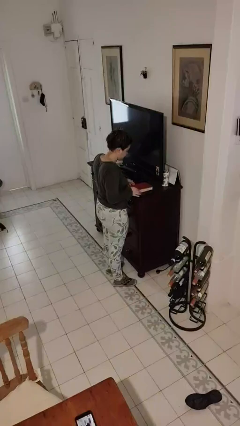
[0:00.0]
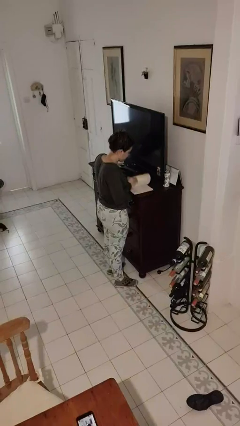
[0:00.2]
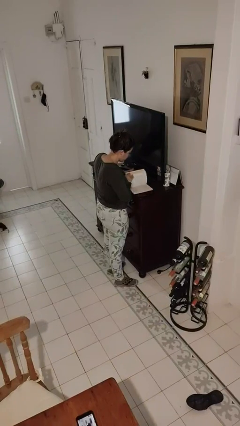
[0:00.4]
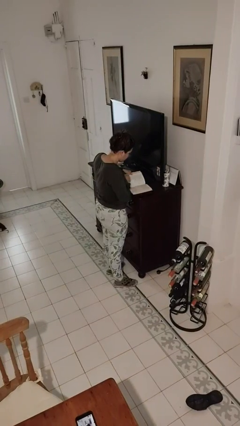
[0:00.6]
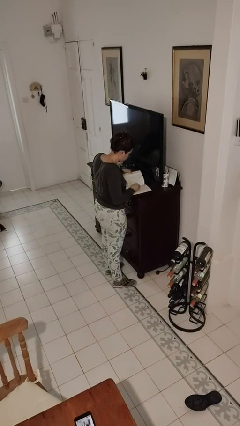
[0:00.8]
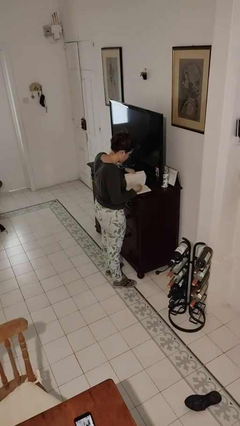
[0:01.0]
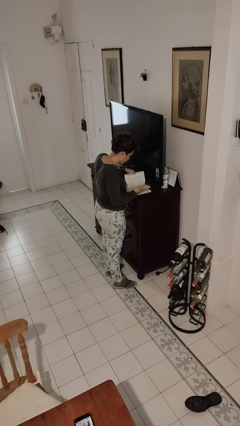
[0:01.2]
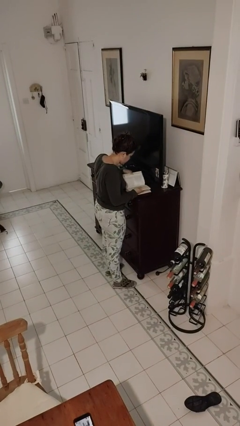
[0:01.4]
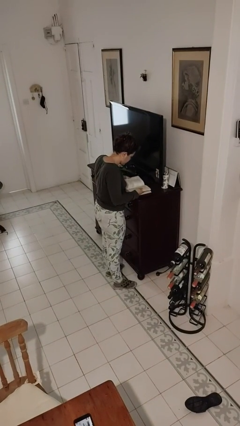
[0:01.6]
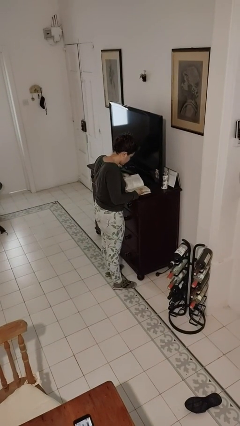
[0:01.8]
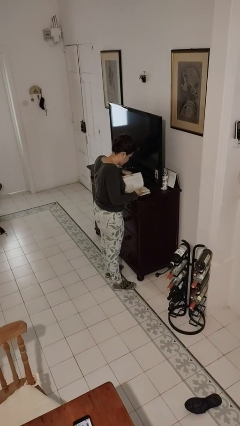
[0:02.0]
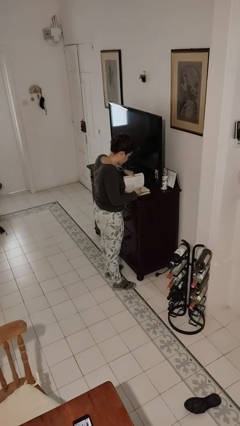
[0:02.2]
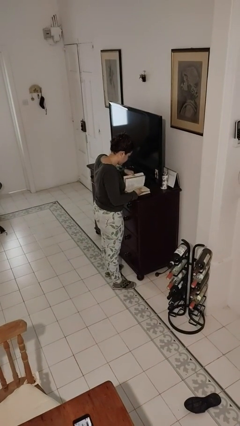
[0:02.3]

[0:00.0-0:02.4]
person reads book

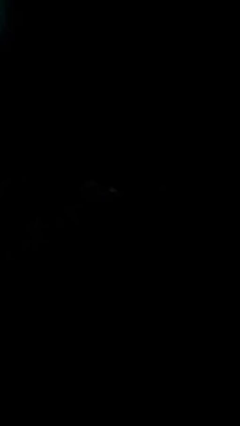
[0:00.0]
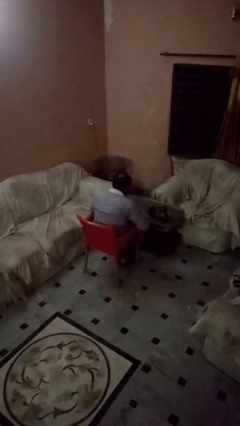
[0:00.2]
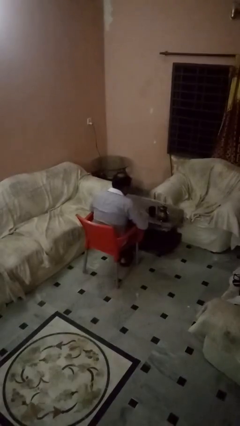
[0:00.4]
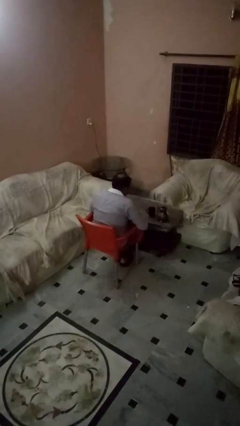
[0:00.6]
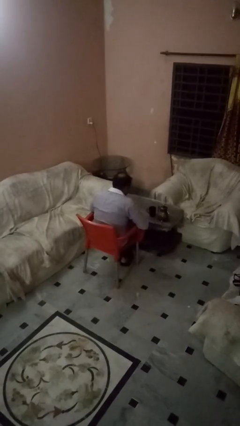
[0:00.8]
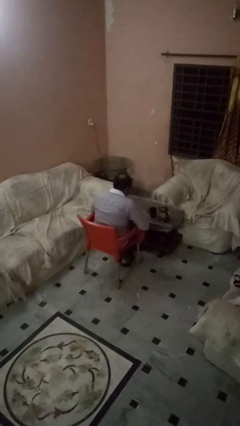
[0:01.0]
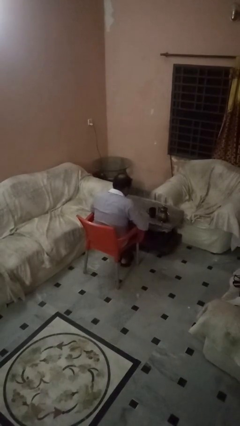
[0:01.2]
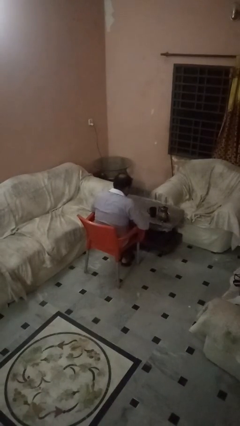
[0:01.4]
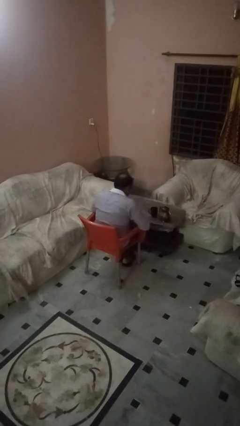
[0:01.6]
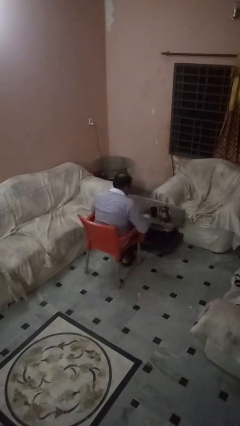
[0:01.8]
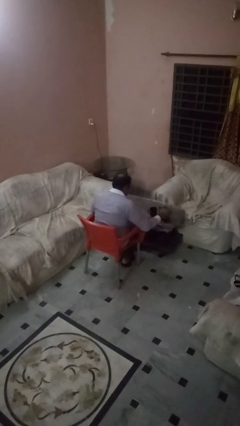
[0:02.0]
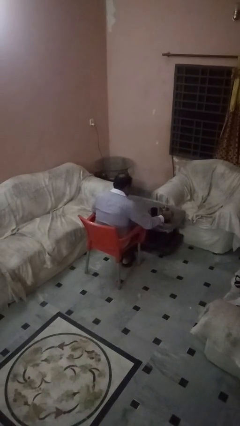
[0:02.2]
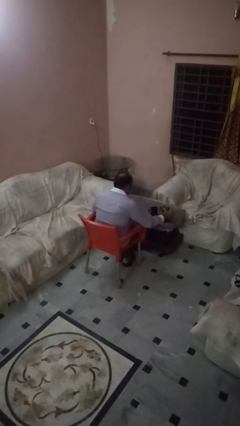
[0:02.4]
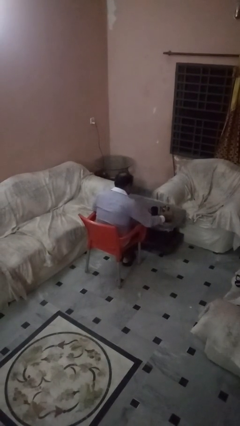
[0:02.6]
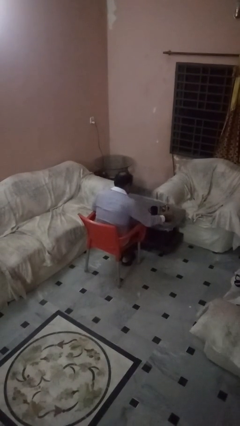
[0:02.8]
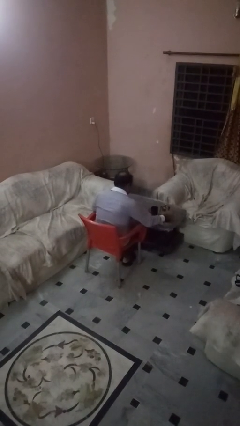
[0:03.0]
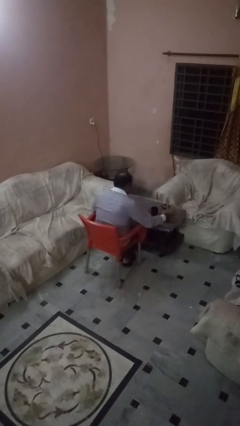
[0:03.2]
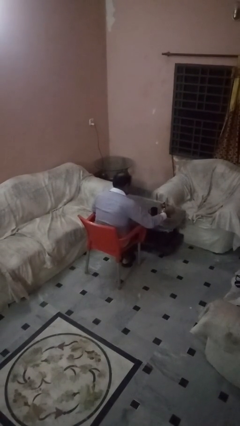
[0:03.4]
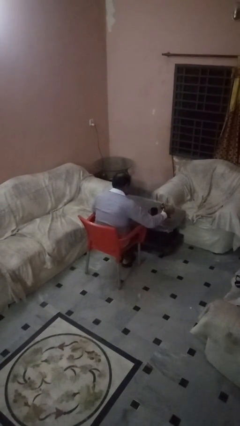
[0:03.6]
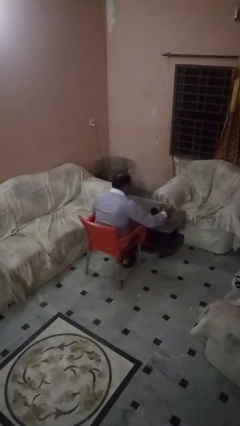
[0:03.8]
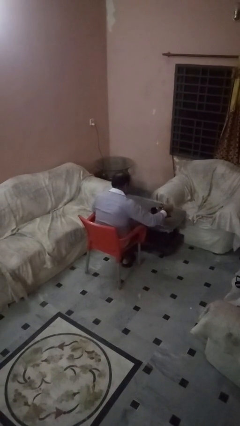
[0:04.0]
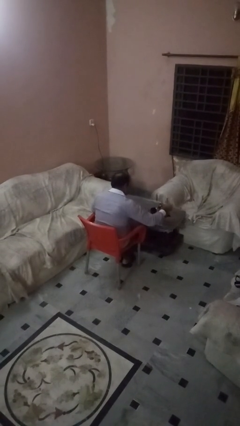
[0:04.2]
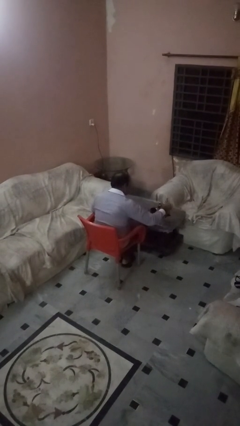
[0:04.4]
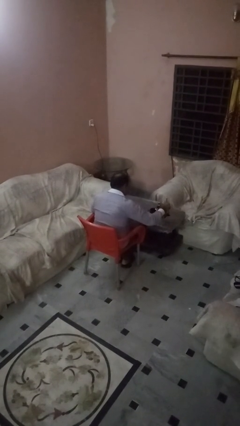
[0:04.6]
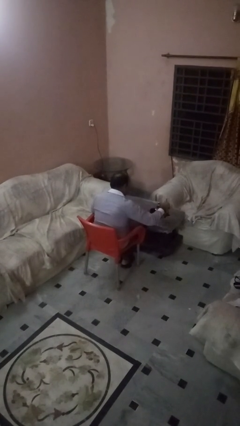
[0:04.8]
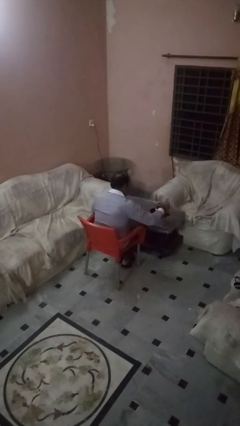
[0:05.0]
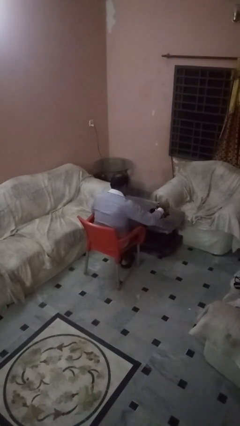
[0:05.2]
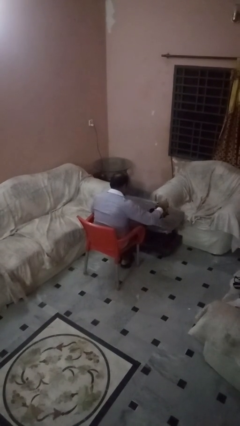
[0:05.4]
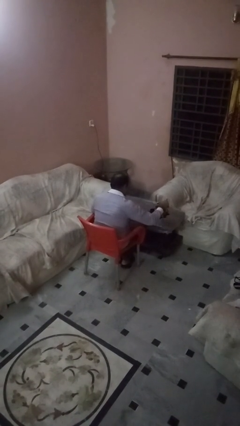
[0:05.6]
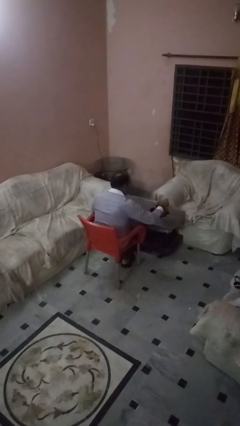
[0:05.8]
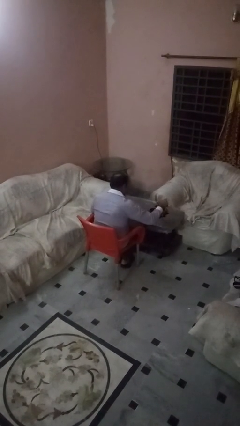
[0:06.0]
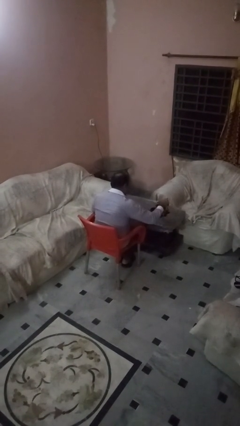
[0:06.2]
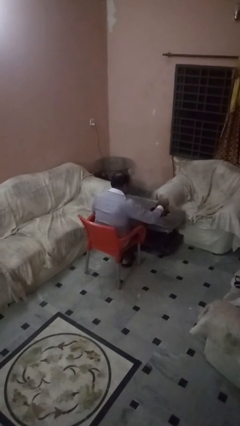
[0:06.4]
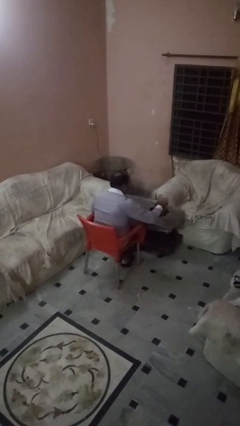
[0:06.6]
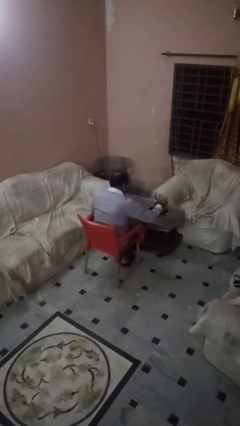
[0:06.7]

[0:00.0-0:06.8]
person pours coffee into mug

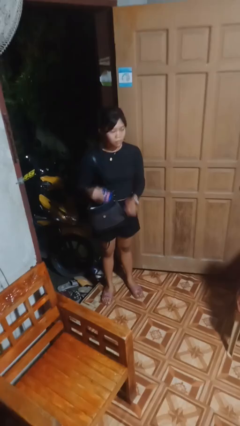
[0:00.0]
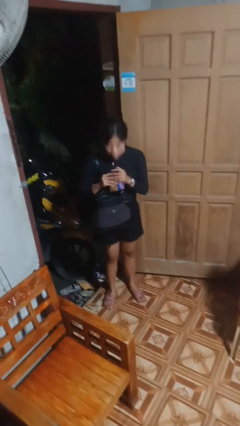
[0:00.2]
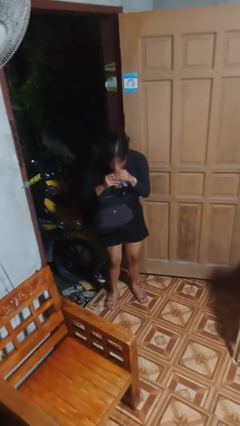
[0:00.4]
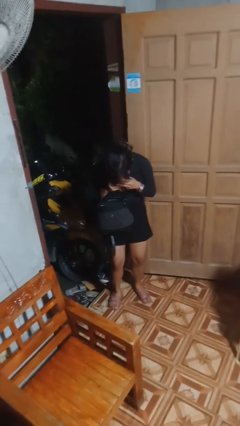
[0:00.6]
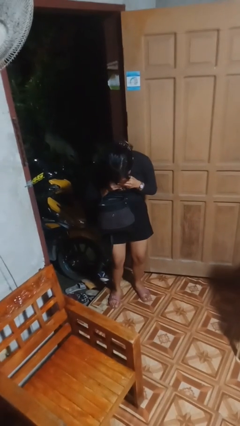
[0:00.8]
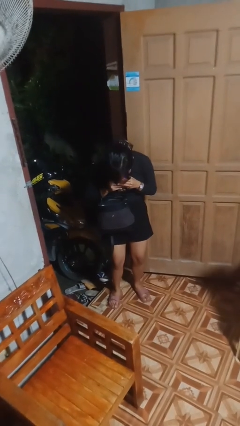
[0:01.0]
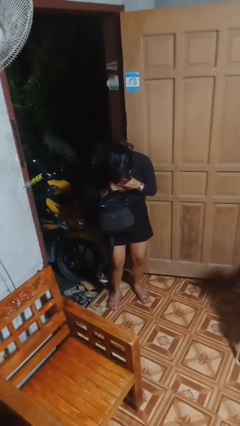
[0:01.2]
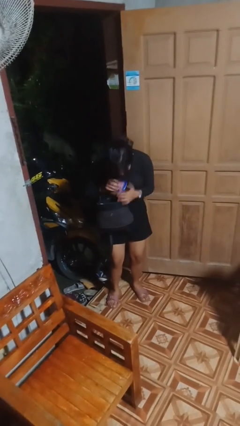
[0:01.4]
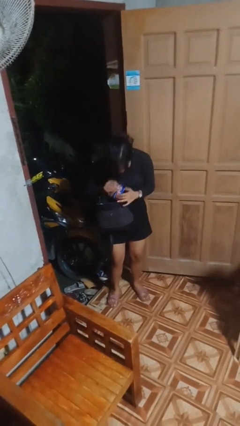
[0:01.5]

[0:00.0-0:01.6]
person eats snack from bag

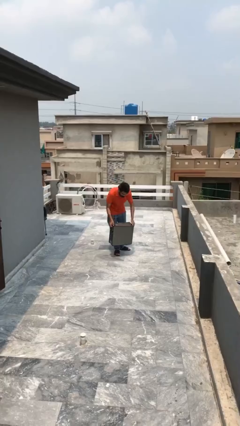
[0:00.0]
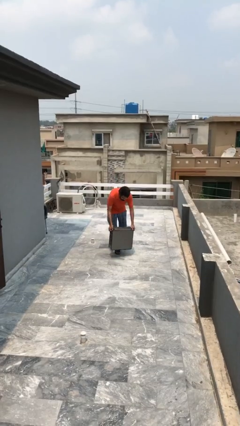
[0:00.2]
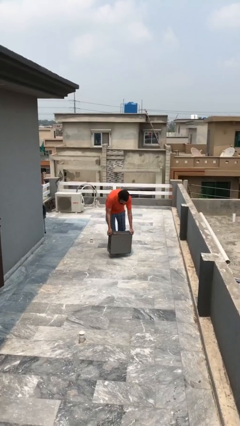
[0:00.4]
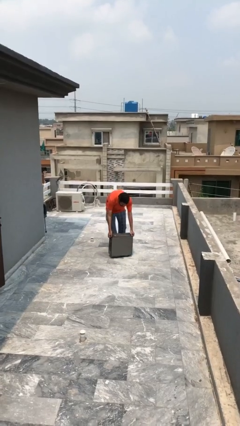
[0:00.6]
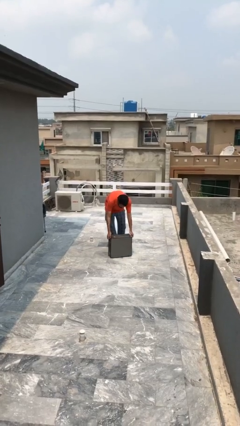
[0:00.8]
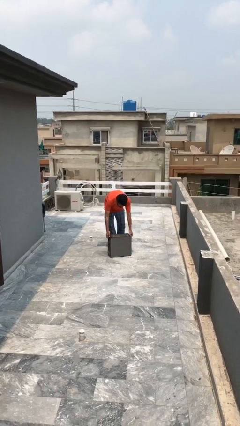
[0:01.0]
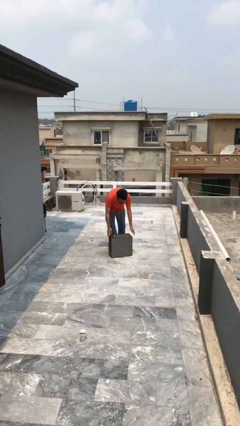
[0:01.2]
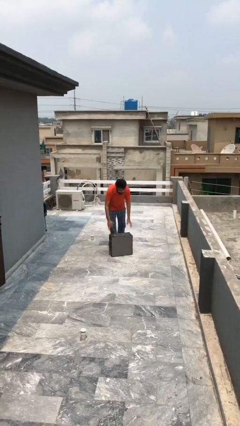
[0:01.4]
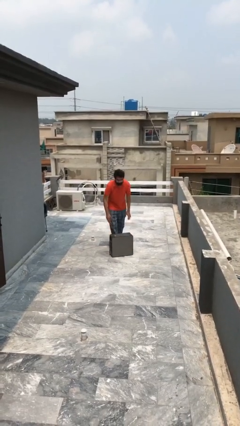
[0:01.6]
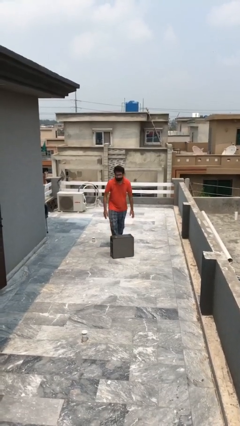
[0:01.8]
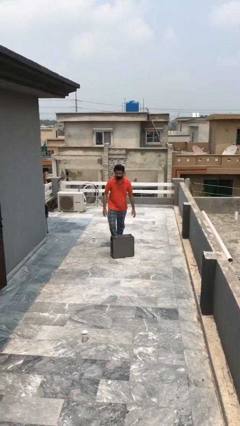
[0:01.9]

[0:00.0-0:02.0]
person puts down object on floor

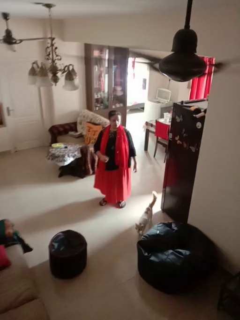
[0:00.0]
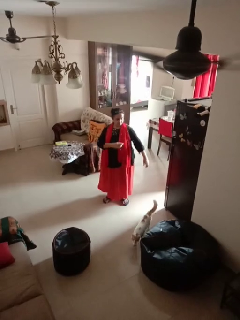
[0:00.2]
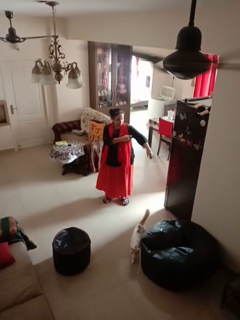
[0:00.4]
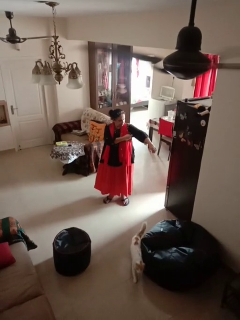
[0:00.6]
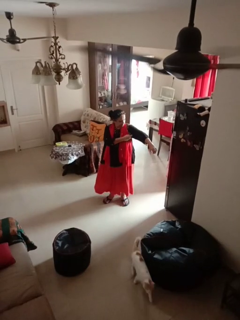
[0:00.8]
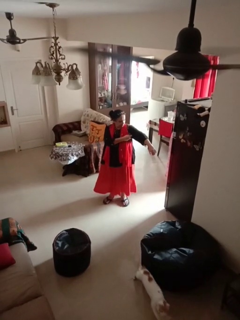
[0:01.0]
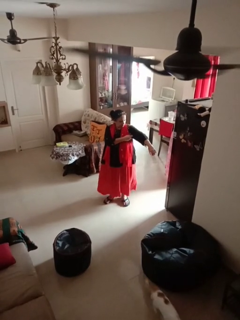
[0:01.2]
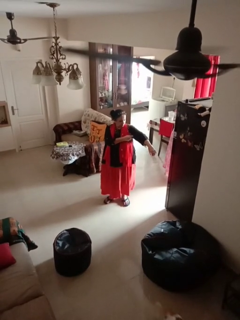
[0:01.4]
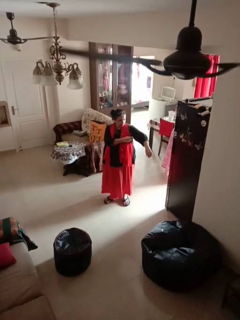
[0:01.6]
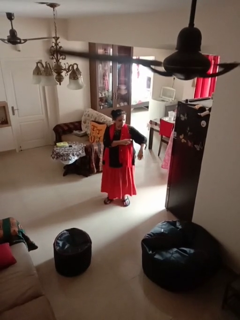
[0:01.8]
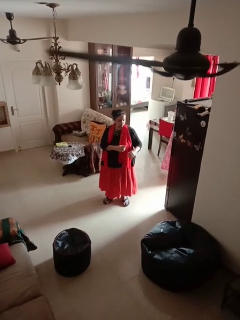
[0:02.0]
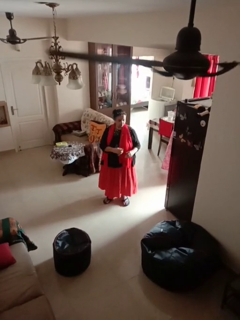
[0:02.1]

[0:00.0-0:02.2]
person applies deodorant

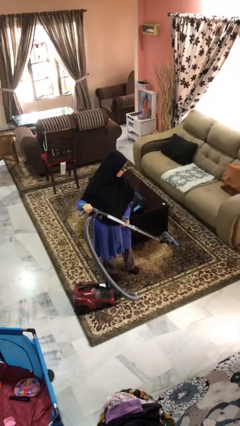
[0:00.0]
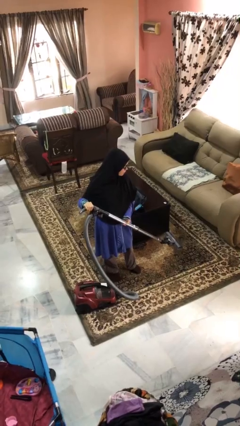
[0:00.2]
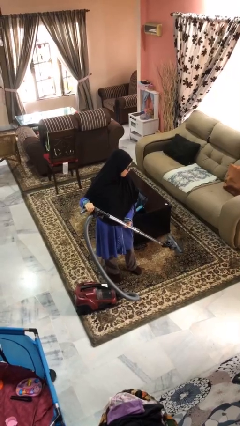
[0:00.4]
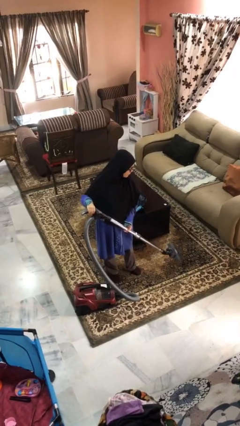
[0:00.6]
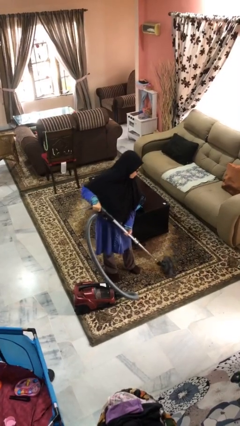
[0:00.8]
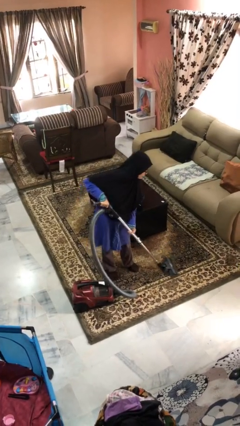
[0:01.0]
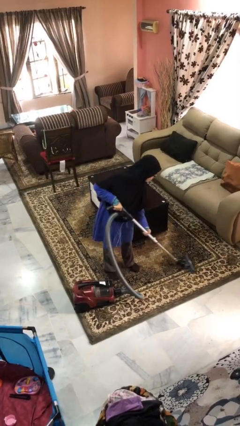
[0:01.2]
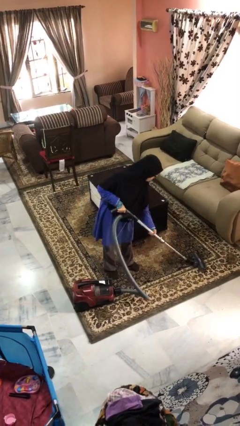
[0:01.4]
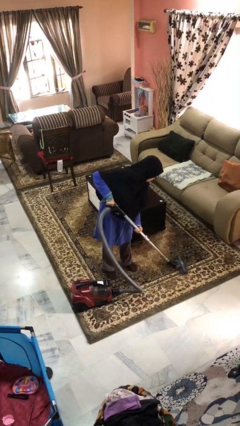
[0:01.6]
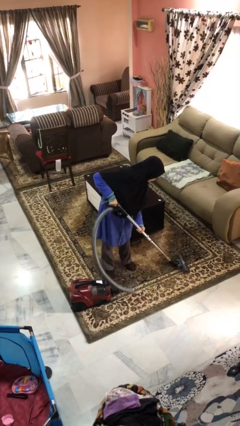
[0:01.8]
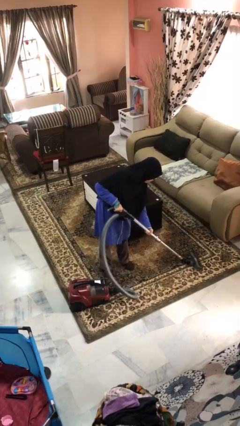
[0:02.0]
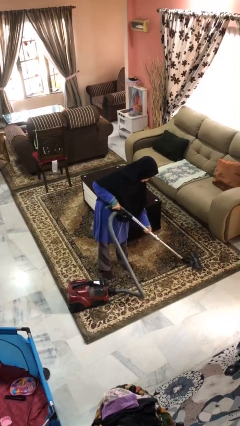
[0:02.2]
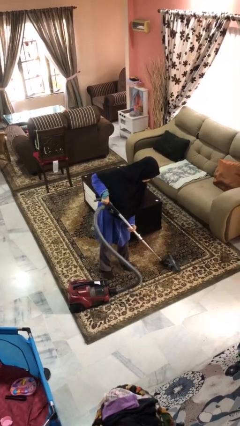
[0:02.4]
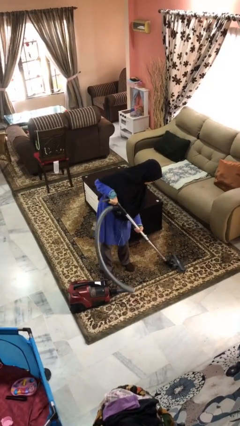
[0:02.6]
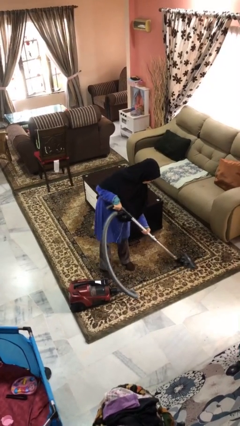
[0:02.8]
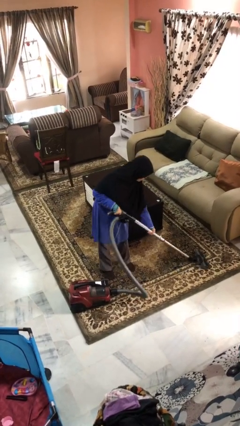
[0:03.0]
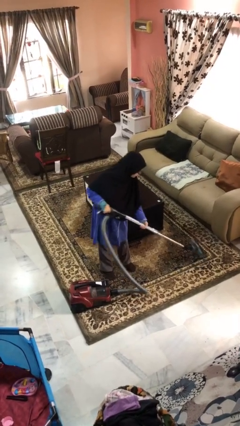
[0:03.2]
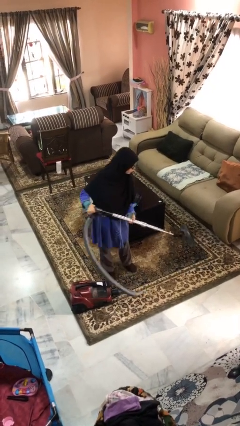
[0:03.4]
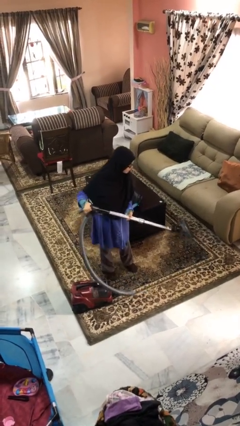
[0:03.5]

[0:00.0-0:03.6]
person vacuums carpet
